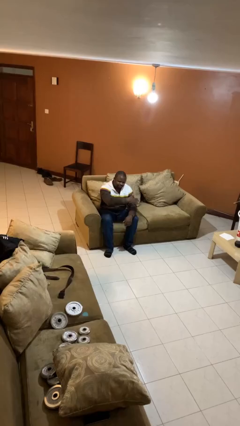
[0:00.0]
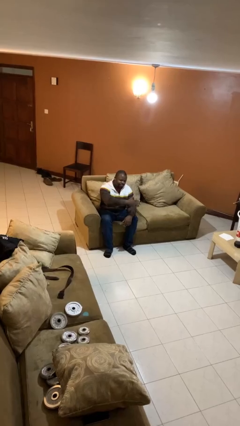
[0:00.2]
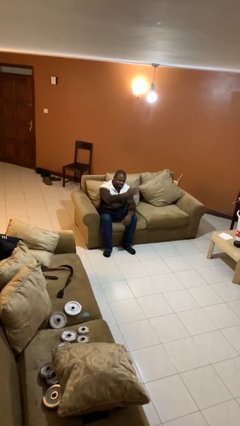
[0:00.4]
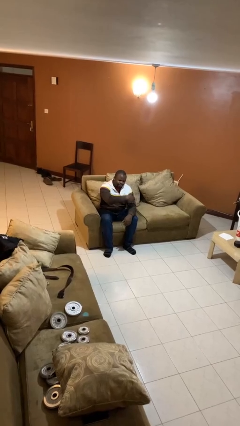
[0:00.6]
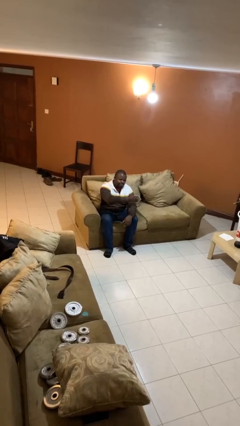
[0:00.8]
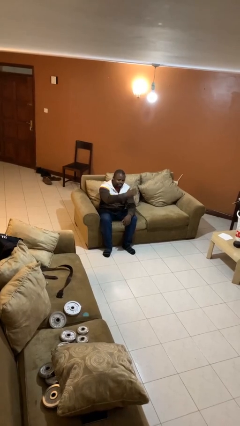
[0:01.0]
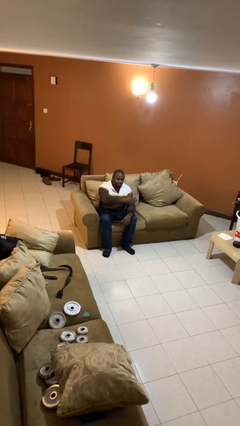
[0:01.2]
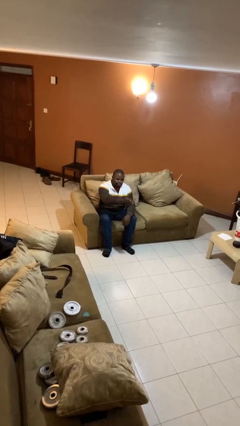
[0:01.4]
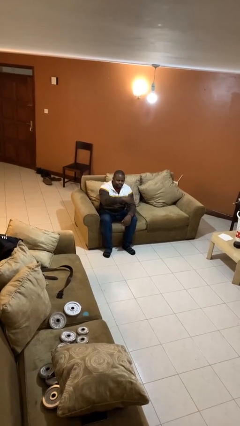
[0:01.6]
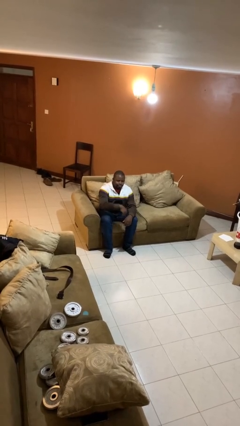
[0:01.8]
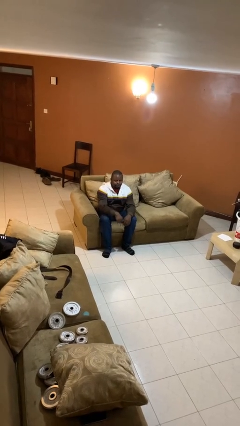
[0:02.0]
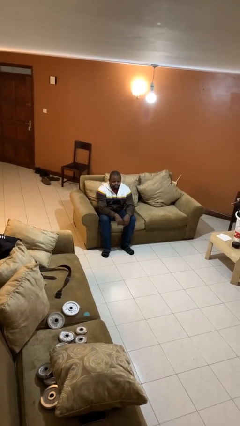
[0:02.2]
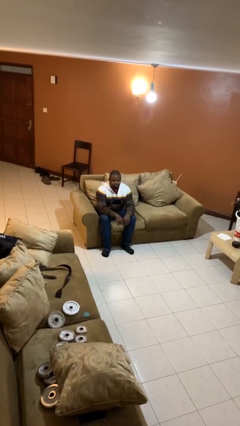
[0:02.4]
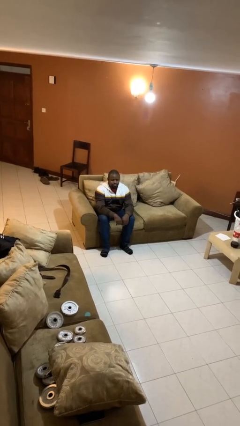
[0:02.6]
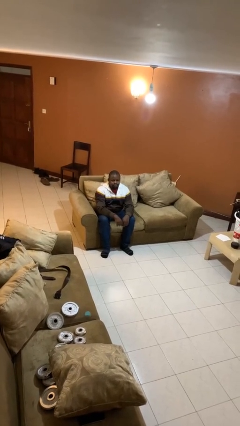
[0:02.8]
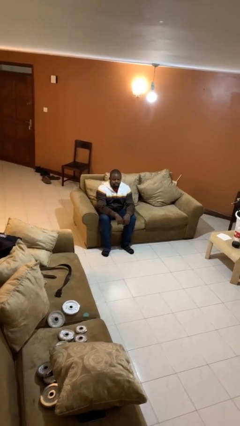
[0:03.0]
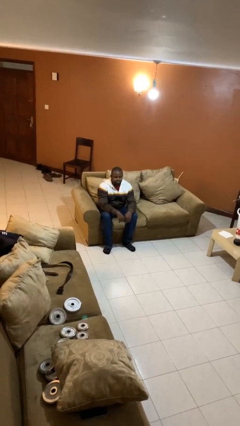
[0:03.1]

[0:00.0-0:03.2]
person gestures come here

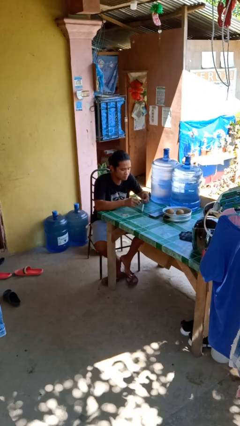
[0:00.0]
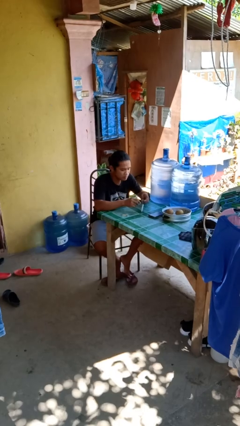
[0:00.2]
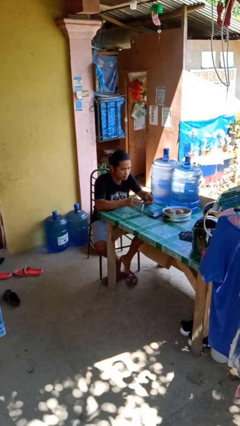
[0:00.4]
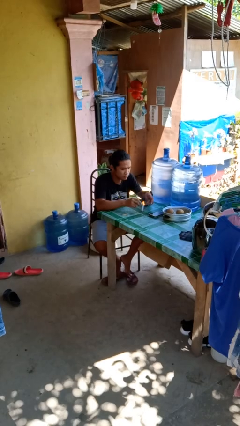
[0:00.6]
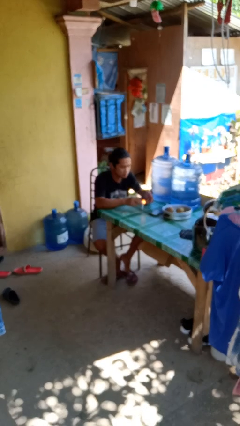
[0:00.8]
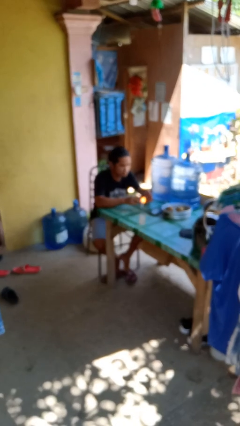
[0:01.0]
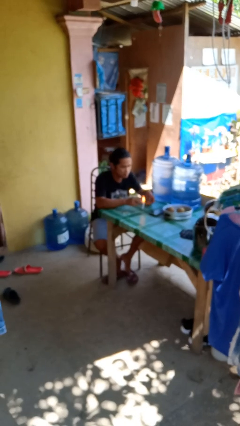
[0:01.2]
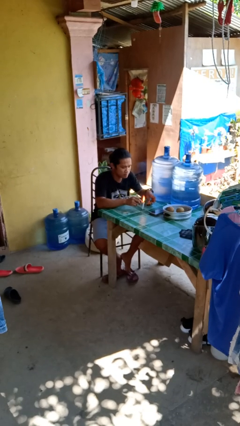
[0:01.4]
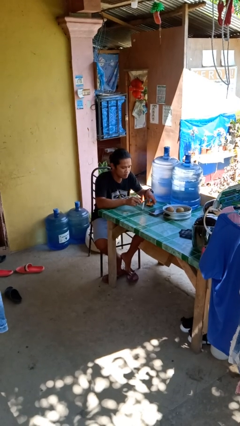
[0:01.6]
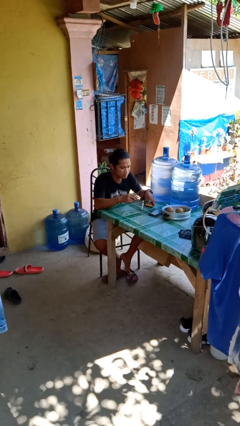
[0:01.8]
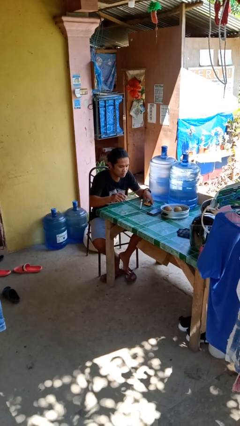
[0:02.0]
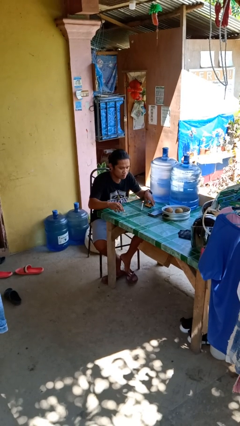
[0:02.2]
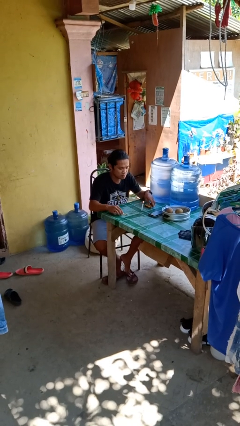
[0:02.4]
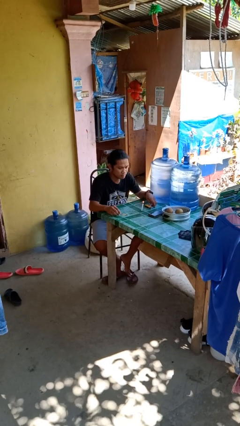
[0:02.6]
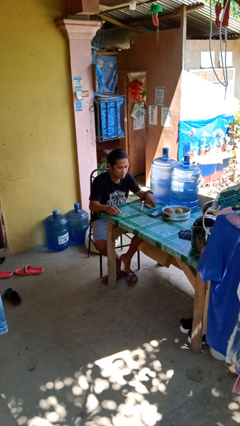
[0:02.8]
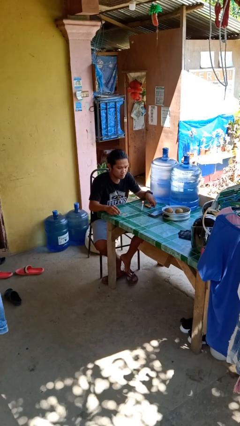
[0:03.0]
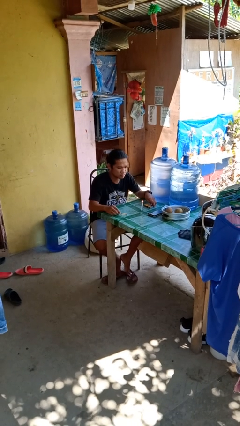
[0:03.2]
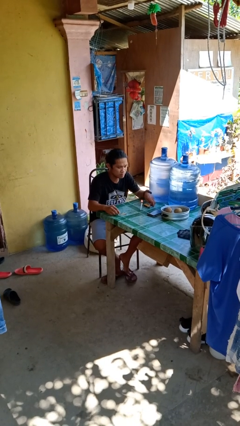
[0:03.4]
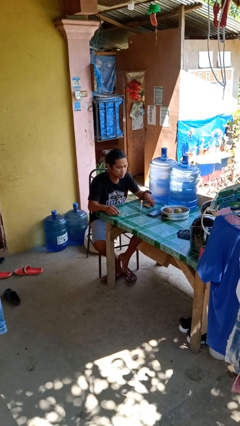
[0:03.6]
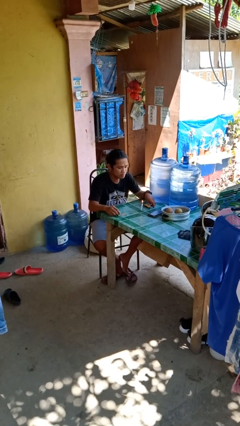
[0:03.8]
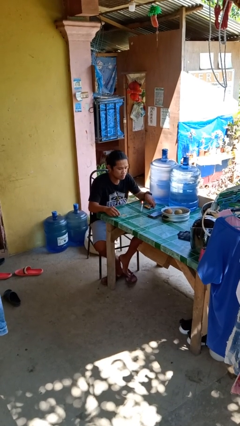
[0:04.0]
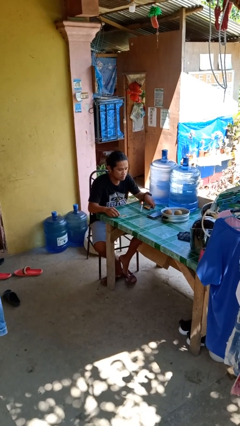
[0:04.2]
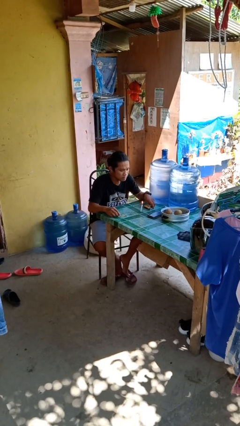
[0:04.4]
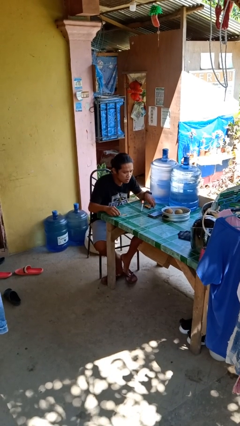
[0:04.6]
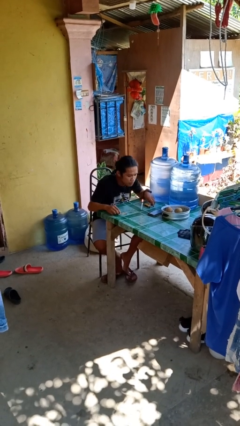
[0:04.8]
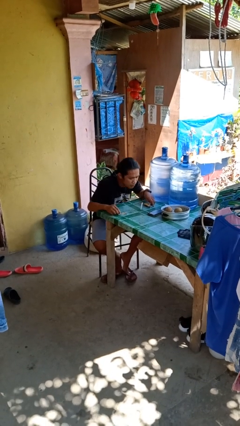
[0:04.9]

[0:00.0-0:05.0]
person lights candle

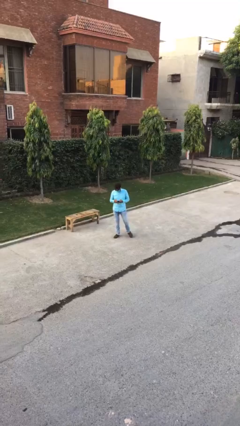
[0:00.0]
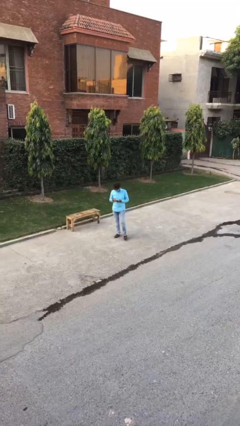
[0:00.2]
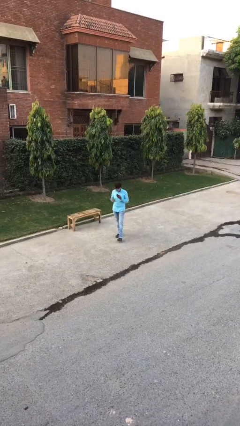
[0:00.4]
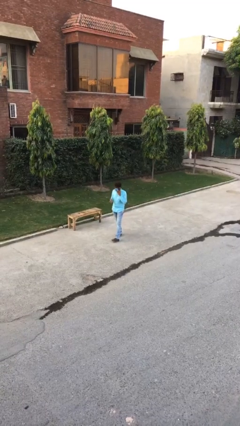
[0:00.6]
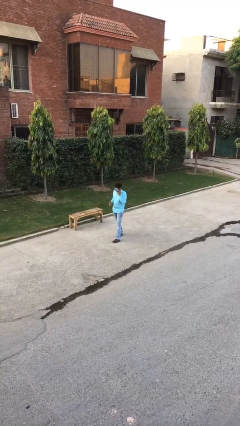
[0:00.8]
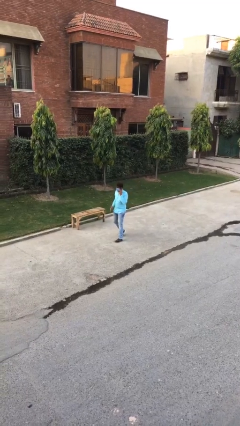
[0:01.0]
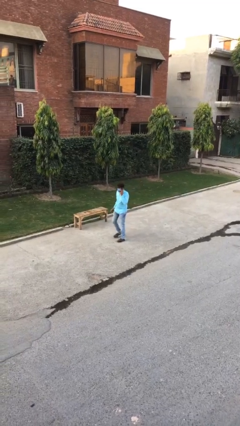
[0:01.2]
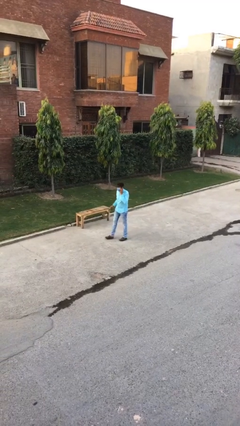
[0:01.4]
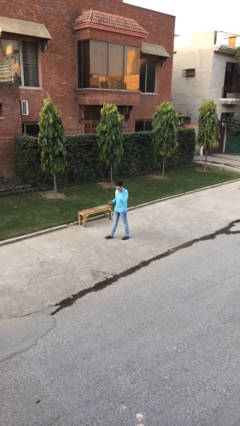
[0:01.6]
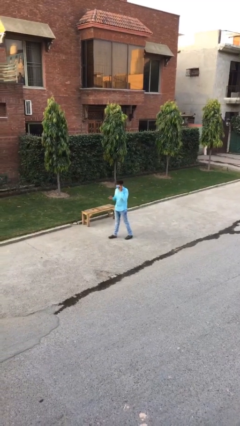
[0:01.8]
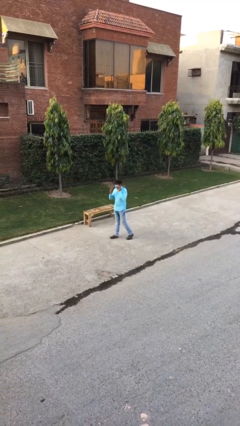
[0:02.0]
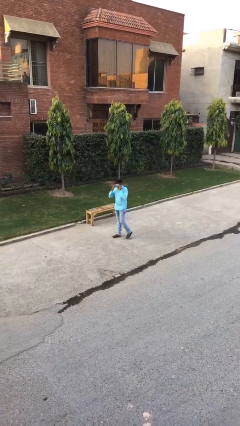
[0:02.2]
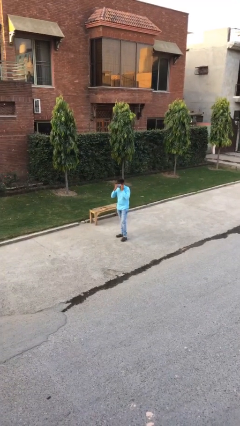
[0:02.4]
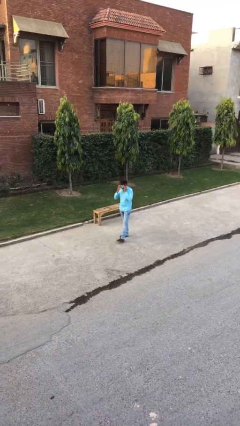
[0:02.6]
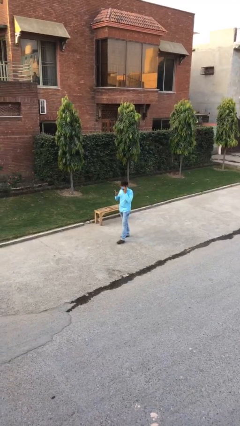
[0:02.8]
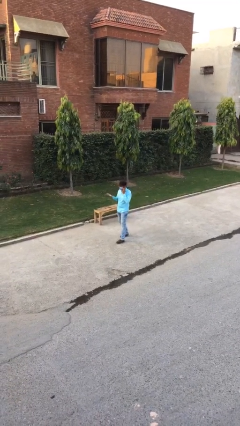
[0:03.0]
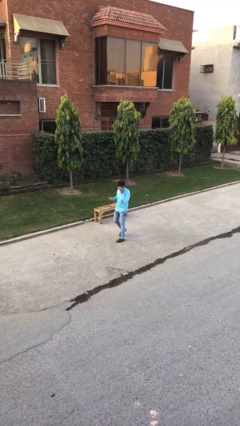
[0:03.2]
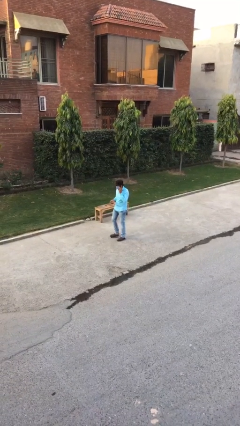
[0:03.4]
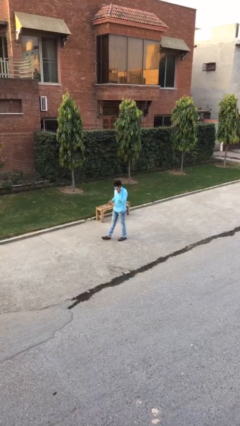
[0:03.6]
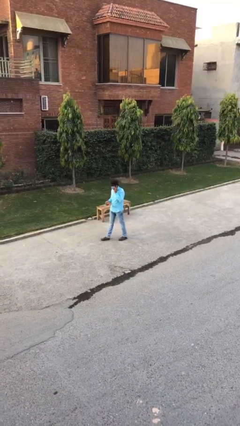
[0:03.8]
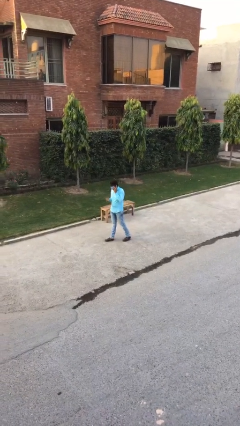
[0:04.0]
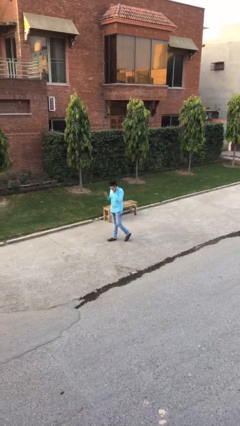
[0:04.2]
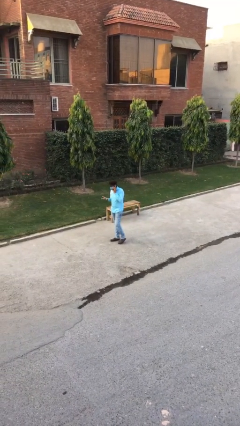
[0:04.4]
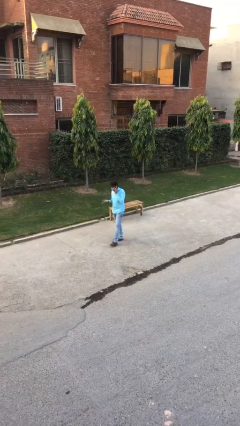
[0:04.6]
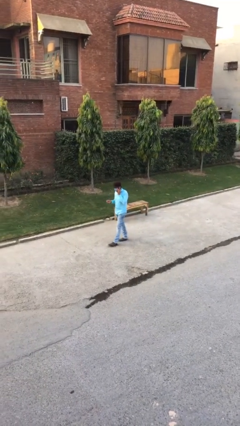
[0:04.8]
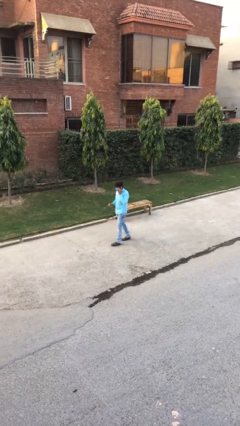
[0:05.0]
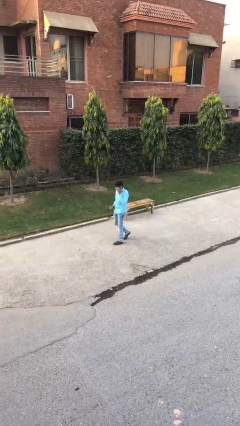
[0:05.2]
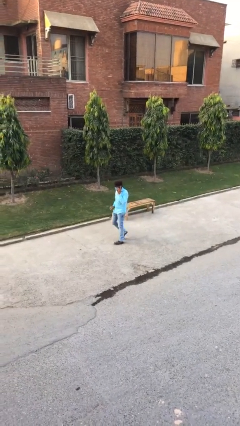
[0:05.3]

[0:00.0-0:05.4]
person talks on phone

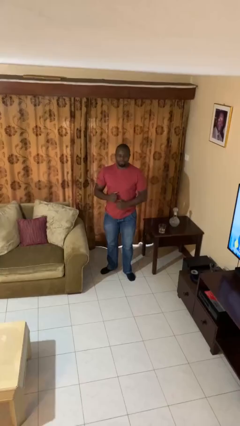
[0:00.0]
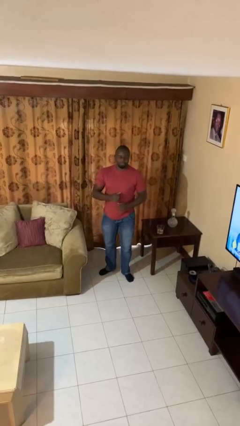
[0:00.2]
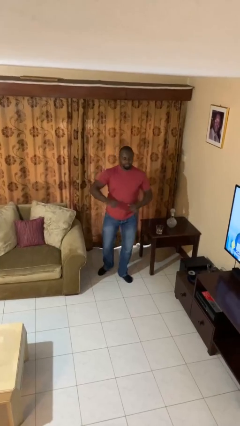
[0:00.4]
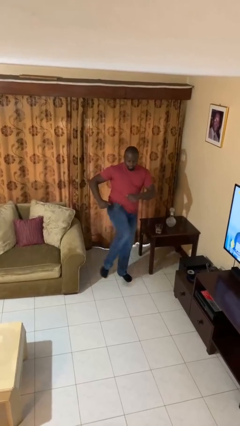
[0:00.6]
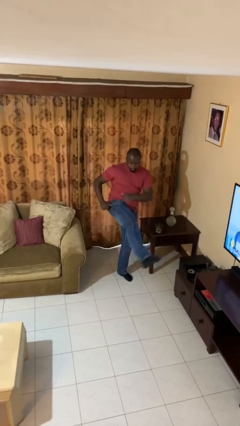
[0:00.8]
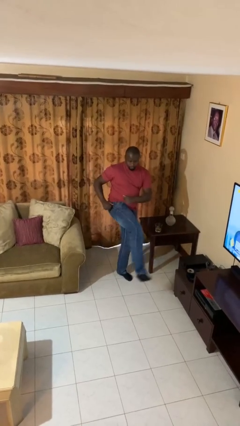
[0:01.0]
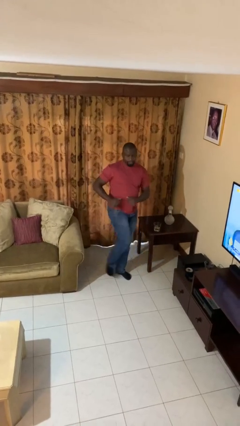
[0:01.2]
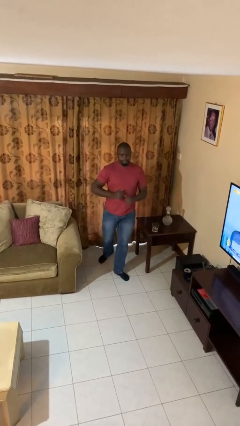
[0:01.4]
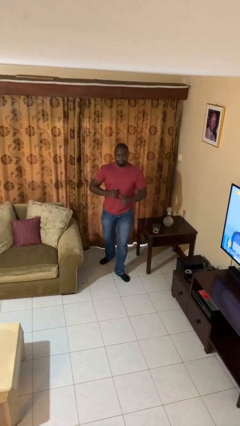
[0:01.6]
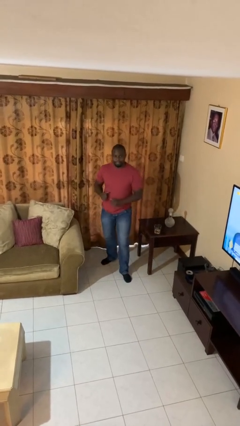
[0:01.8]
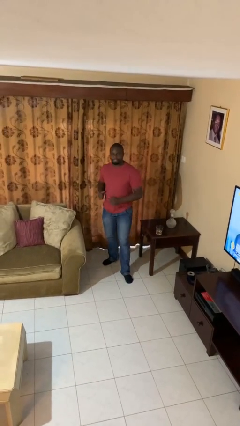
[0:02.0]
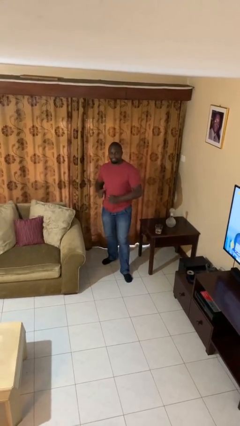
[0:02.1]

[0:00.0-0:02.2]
person karate kicks

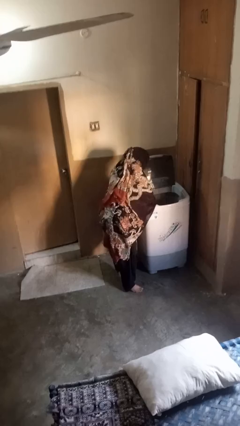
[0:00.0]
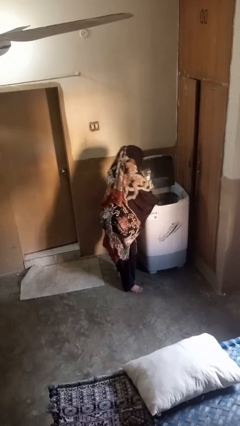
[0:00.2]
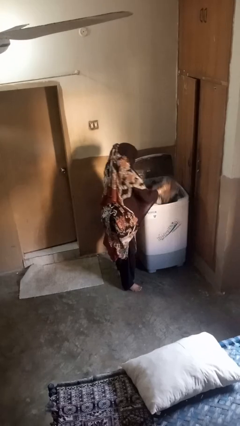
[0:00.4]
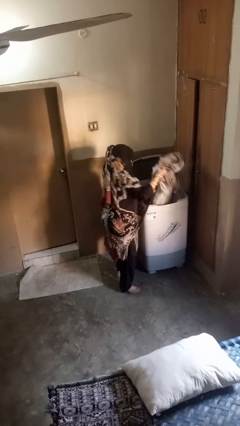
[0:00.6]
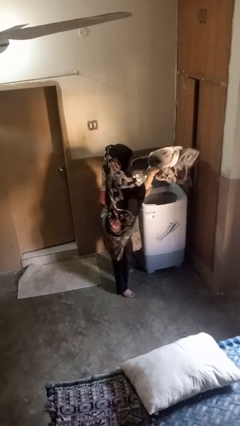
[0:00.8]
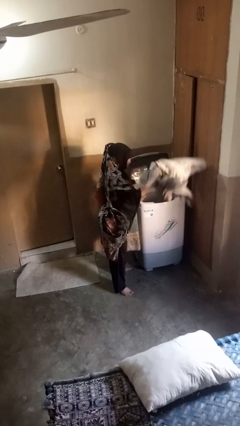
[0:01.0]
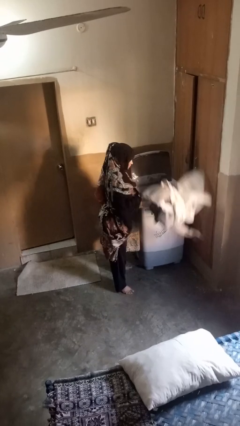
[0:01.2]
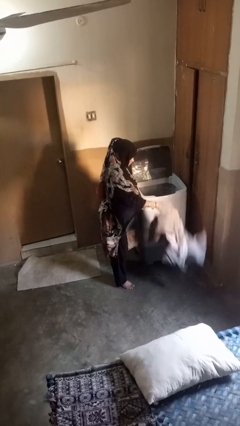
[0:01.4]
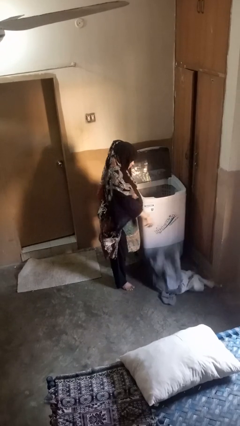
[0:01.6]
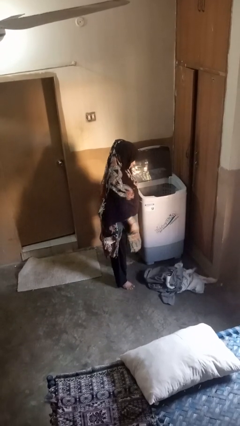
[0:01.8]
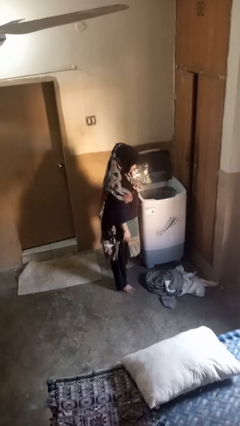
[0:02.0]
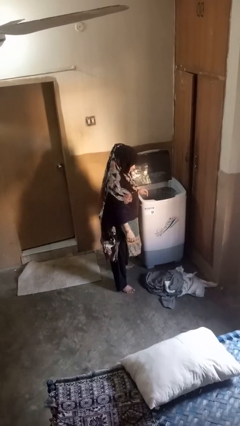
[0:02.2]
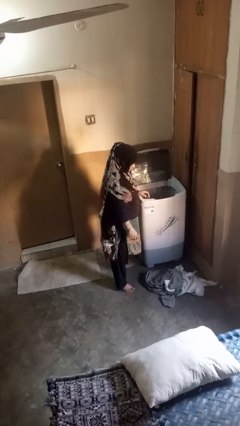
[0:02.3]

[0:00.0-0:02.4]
person unloads clotheswasher
